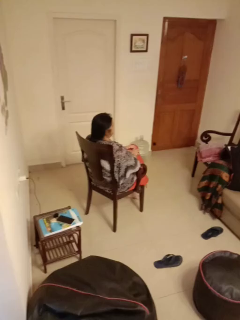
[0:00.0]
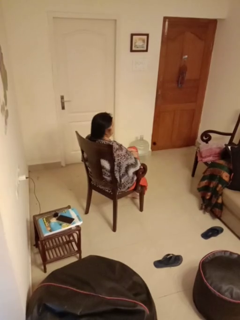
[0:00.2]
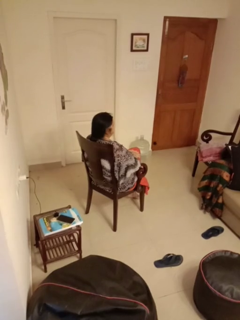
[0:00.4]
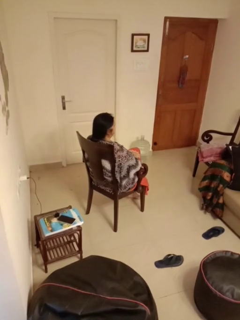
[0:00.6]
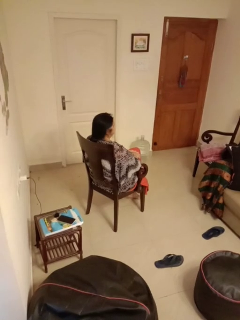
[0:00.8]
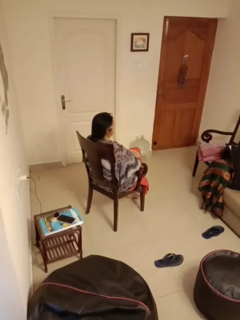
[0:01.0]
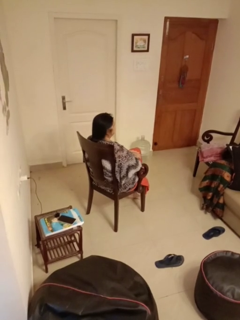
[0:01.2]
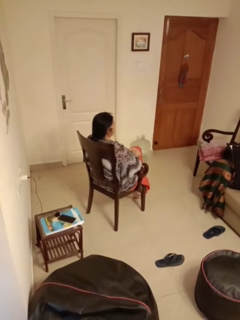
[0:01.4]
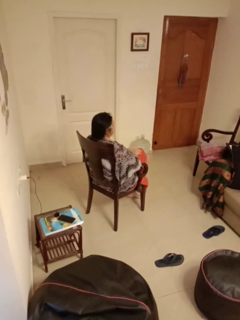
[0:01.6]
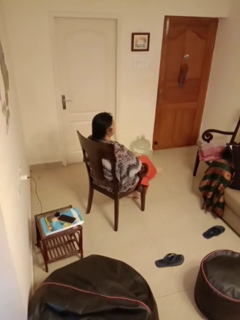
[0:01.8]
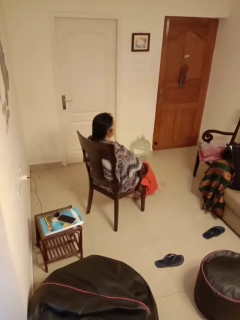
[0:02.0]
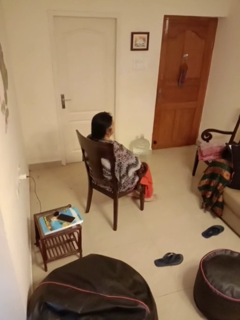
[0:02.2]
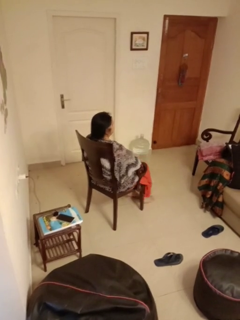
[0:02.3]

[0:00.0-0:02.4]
person crosses legs

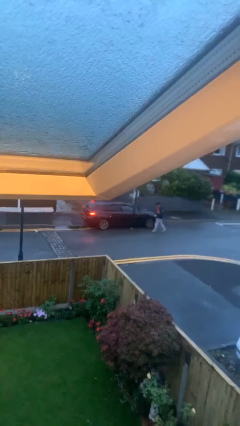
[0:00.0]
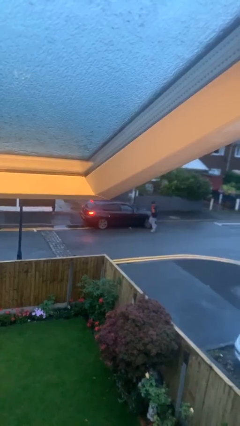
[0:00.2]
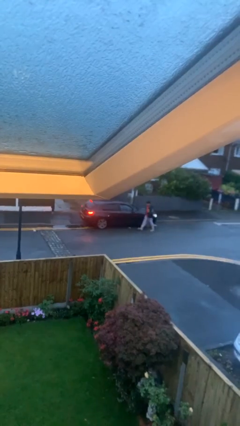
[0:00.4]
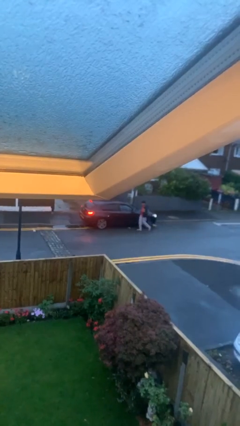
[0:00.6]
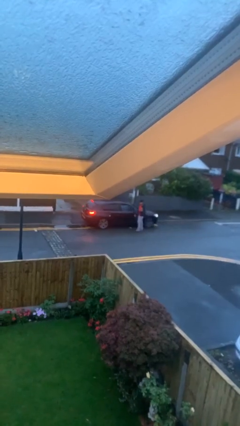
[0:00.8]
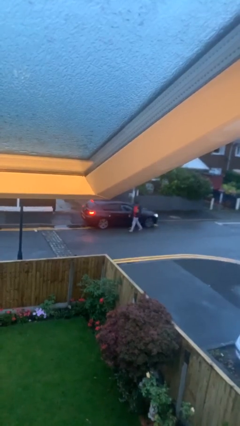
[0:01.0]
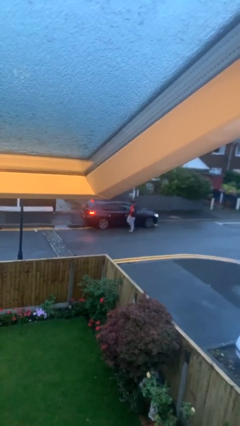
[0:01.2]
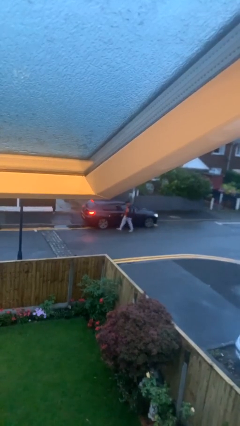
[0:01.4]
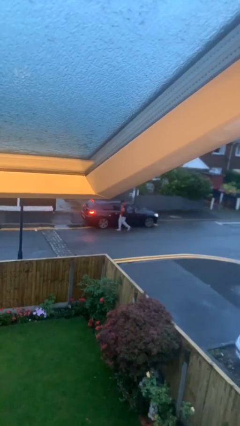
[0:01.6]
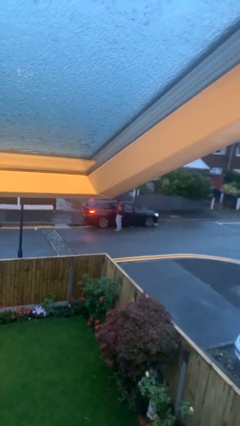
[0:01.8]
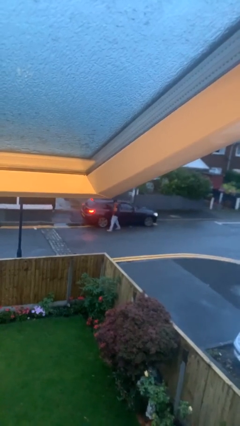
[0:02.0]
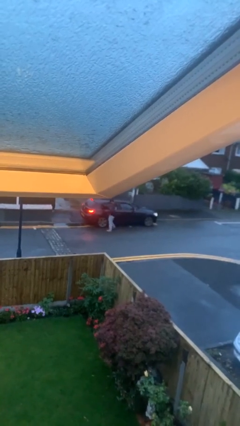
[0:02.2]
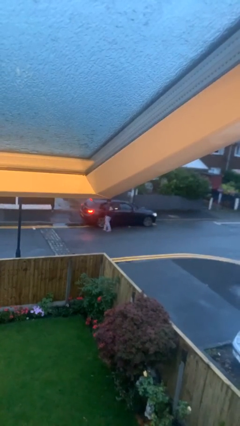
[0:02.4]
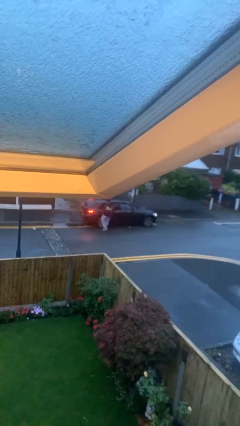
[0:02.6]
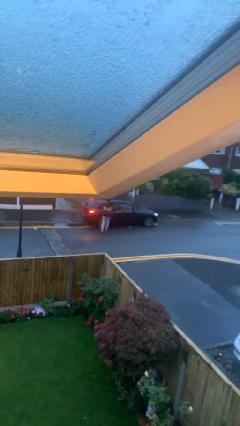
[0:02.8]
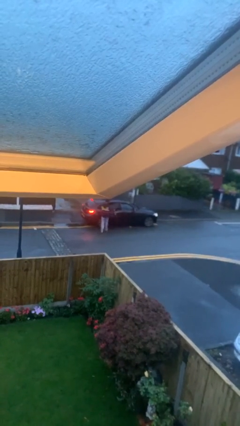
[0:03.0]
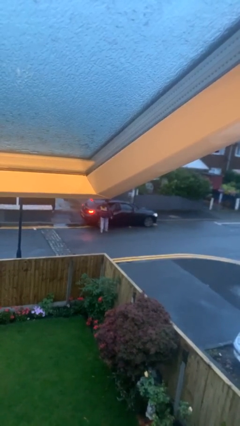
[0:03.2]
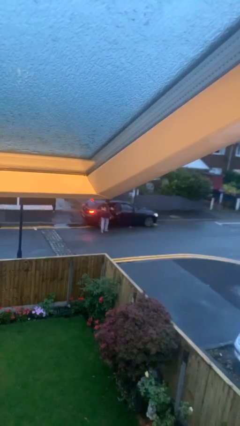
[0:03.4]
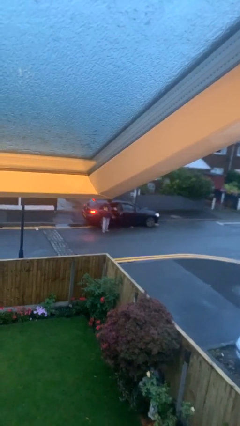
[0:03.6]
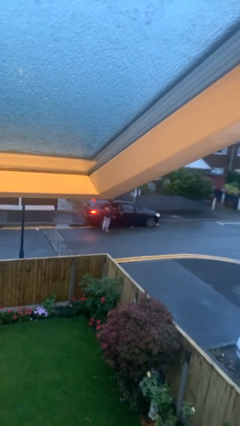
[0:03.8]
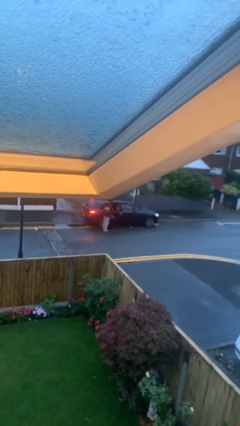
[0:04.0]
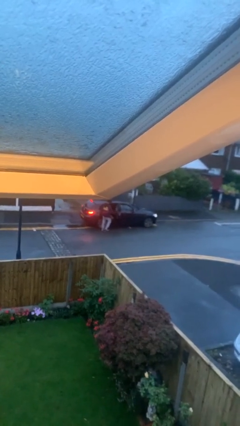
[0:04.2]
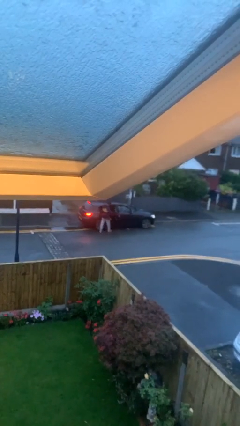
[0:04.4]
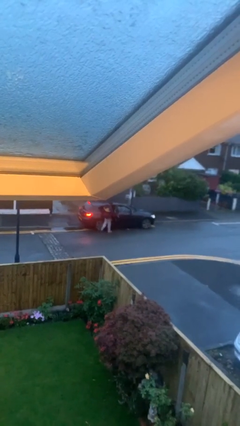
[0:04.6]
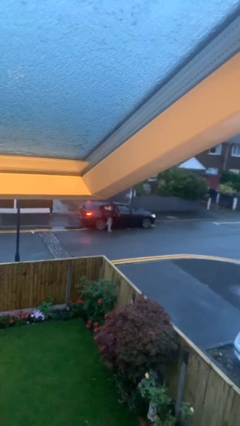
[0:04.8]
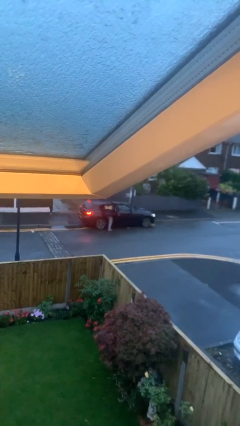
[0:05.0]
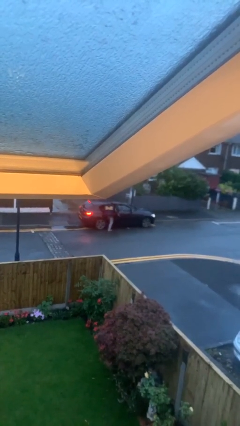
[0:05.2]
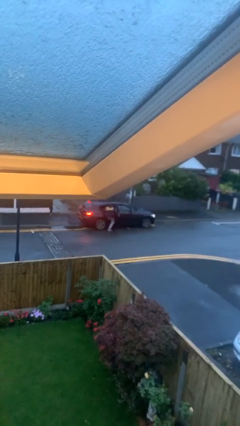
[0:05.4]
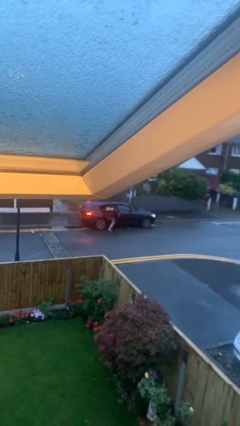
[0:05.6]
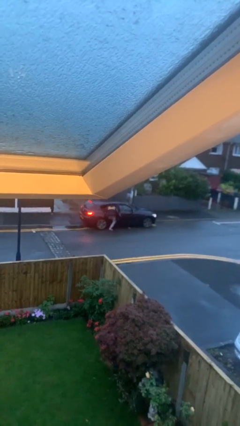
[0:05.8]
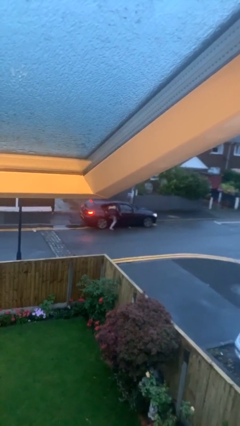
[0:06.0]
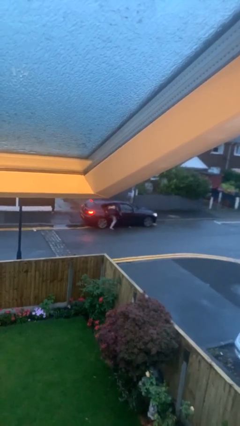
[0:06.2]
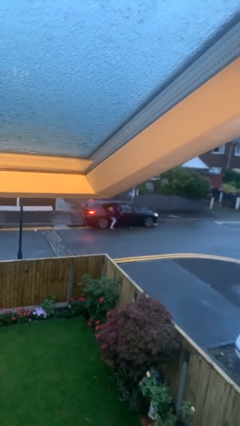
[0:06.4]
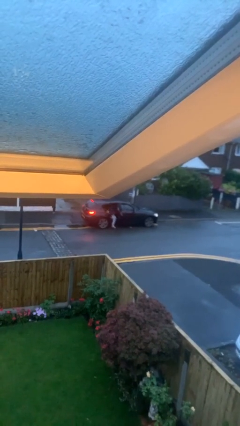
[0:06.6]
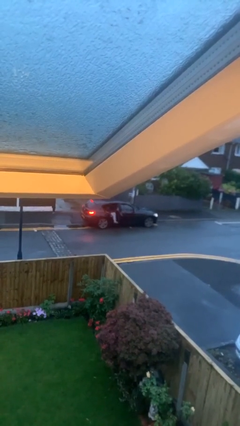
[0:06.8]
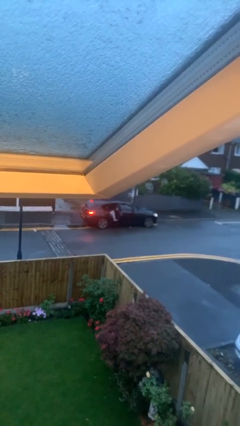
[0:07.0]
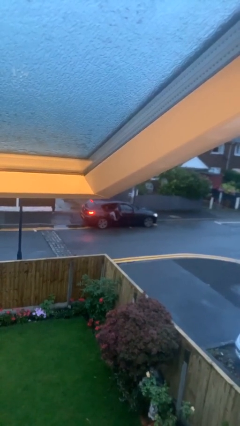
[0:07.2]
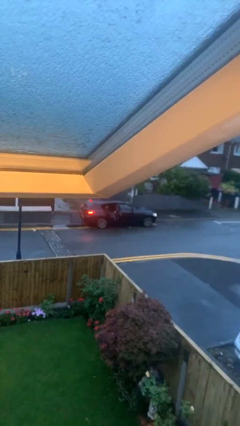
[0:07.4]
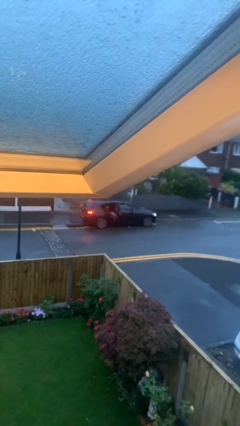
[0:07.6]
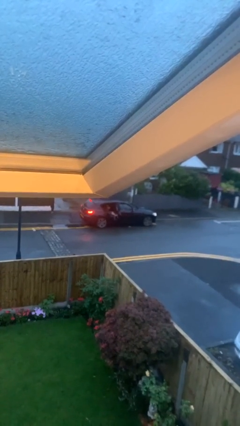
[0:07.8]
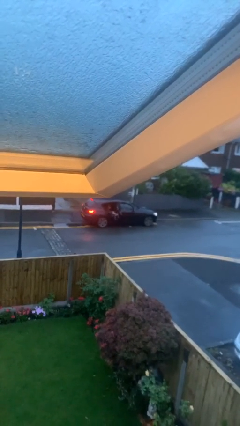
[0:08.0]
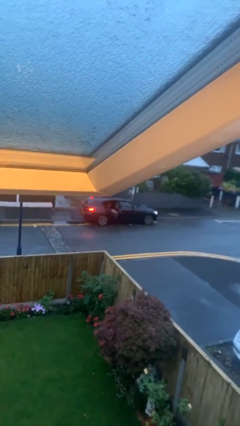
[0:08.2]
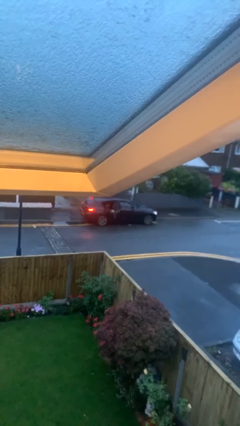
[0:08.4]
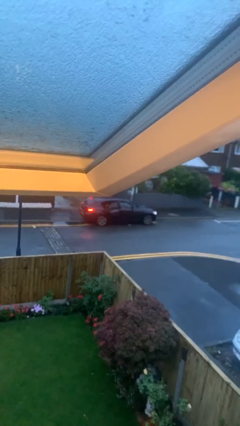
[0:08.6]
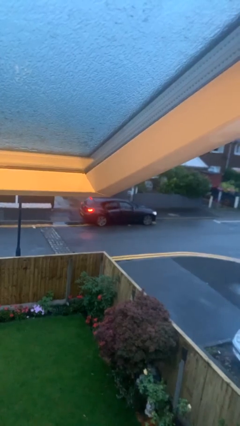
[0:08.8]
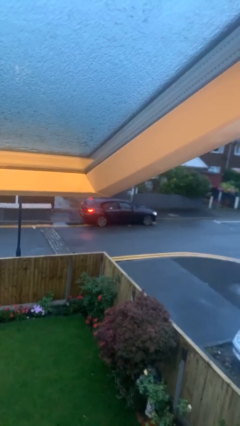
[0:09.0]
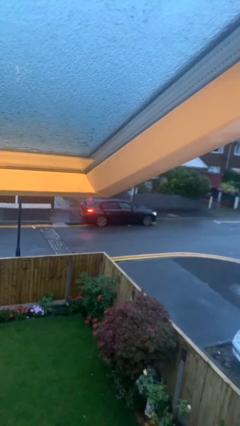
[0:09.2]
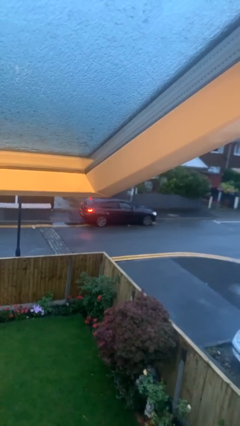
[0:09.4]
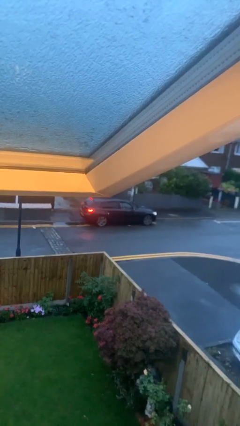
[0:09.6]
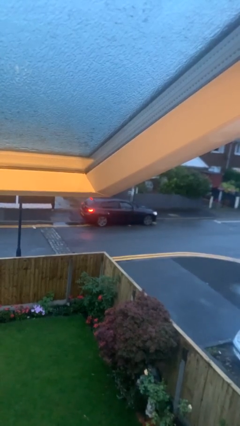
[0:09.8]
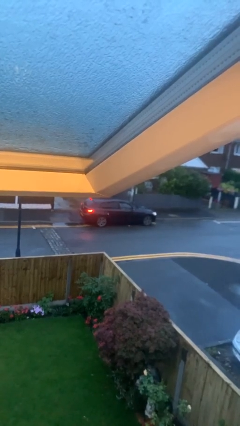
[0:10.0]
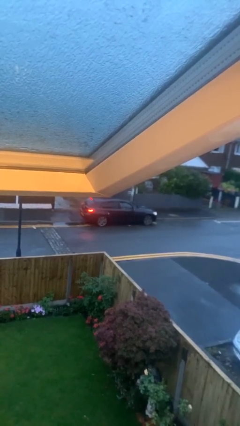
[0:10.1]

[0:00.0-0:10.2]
car picks up person

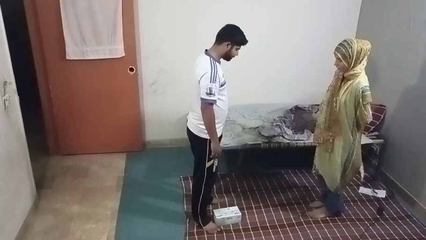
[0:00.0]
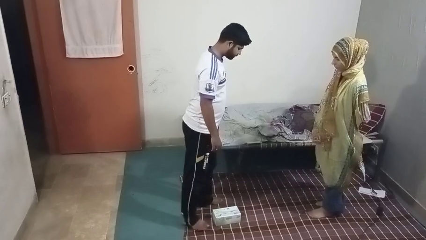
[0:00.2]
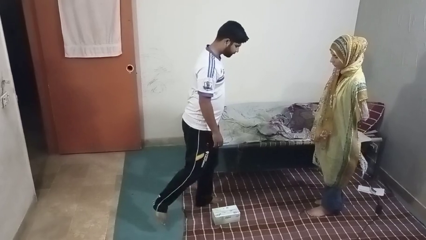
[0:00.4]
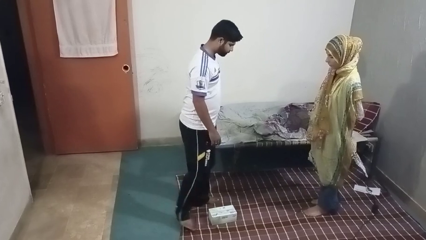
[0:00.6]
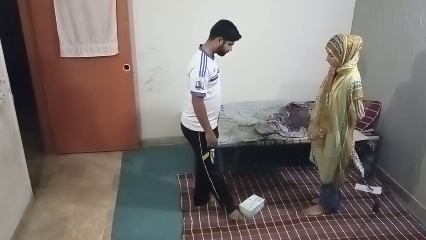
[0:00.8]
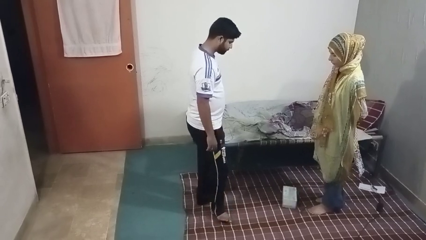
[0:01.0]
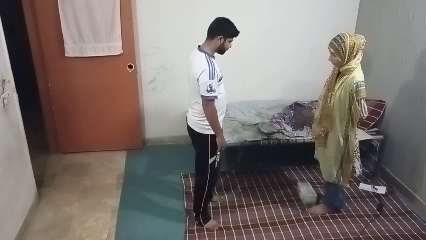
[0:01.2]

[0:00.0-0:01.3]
person kicks object to person

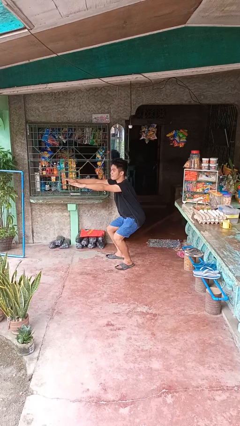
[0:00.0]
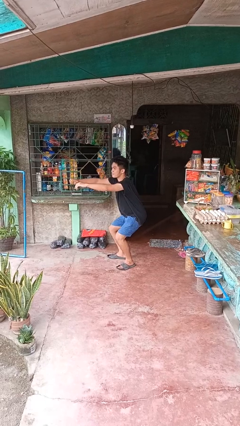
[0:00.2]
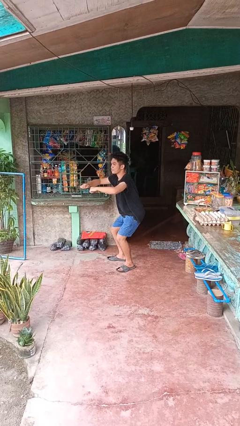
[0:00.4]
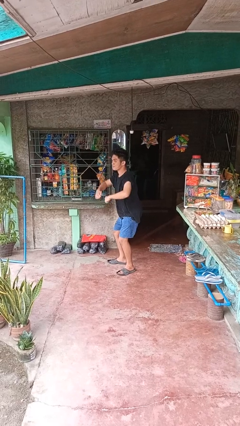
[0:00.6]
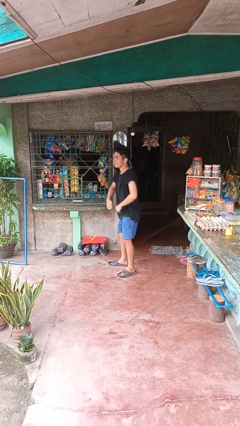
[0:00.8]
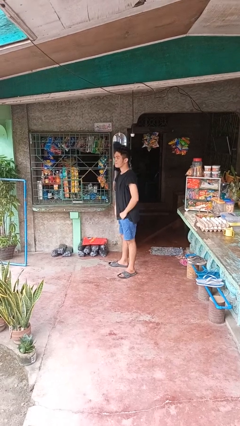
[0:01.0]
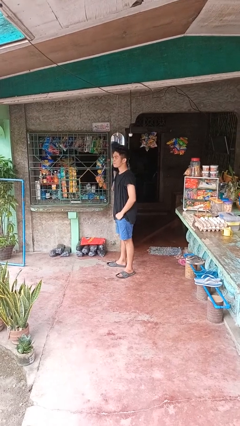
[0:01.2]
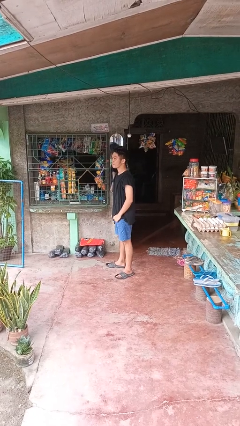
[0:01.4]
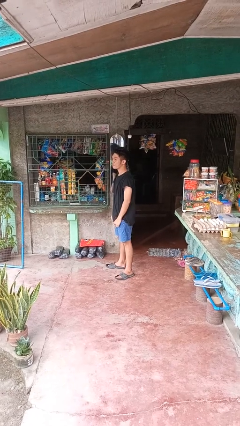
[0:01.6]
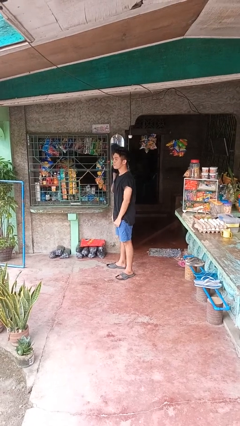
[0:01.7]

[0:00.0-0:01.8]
person stands up

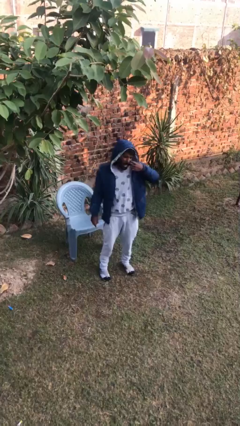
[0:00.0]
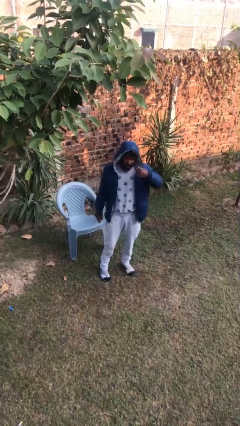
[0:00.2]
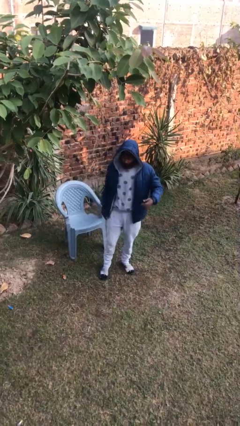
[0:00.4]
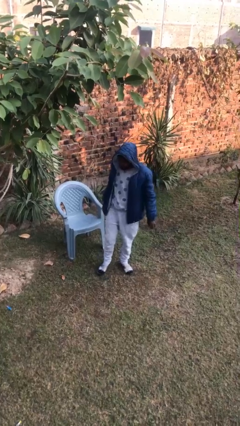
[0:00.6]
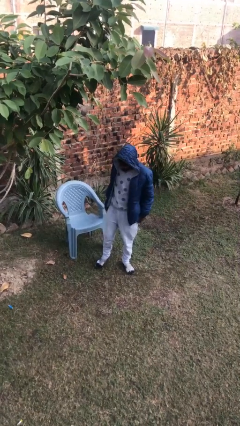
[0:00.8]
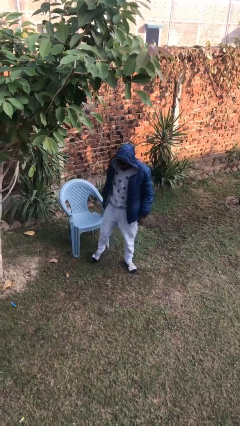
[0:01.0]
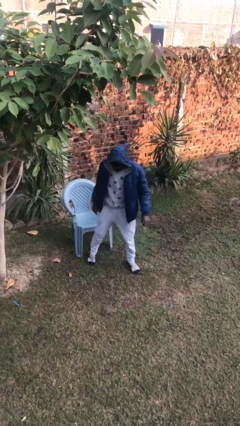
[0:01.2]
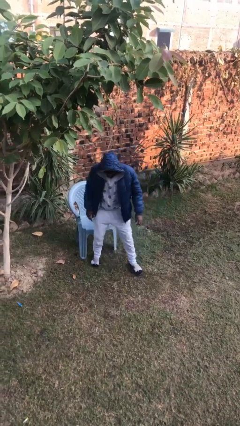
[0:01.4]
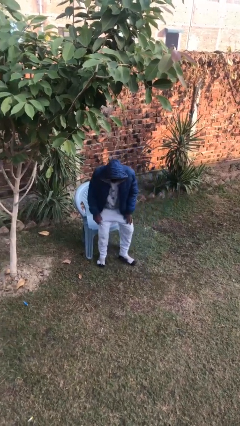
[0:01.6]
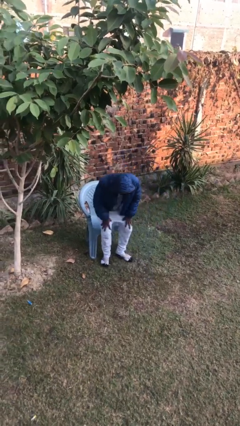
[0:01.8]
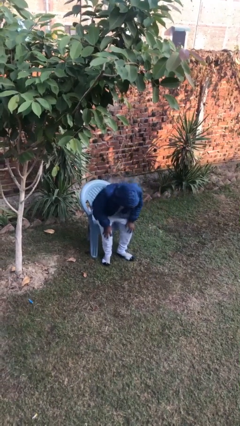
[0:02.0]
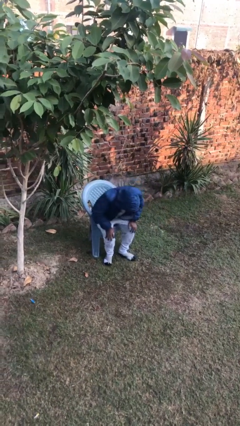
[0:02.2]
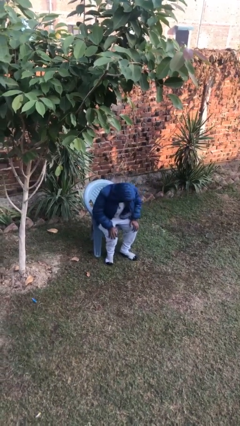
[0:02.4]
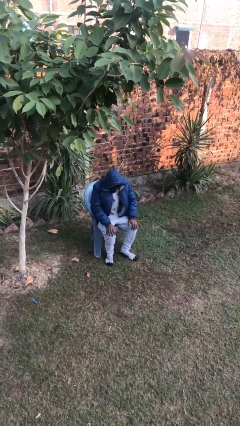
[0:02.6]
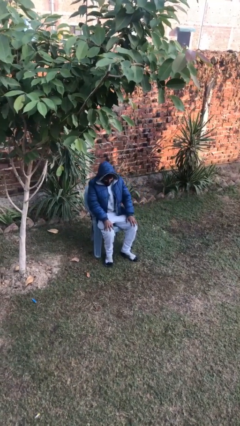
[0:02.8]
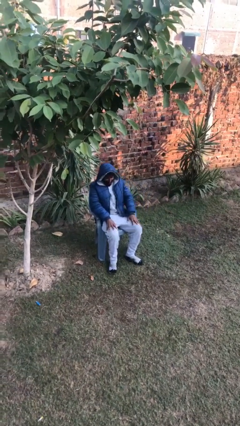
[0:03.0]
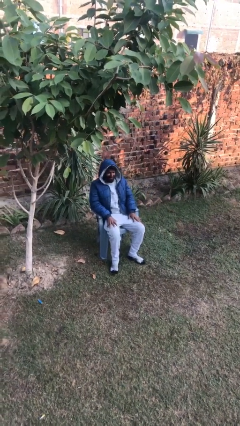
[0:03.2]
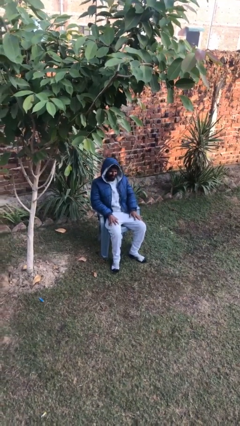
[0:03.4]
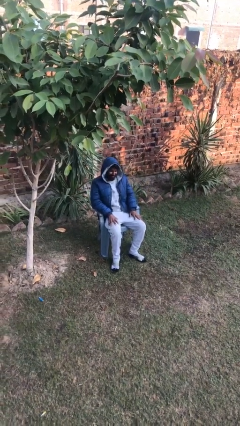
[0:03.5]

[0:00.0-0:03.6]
person sits down
